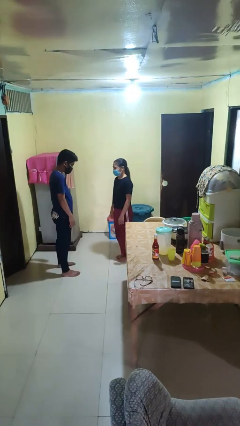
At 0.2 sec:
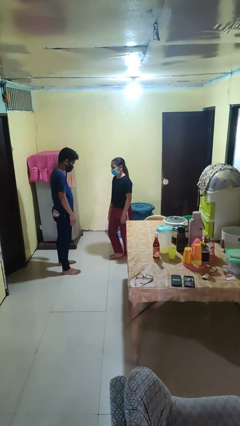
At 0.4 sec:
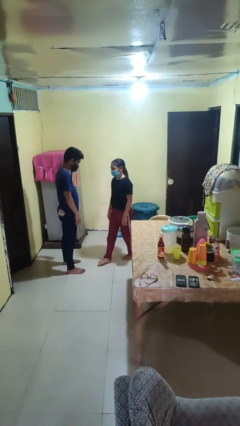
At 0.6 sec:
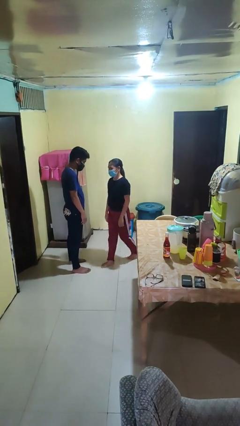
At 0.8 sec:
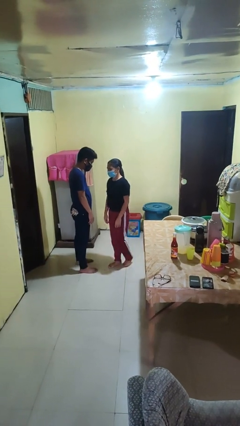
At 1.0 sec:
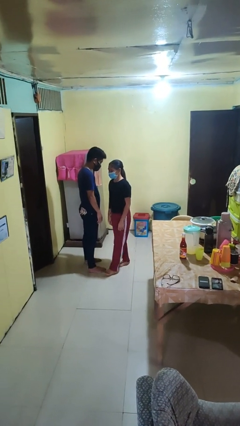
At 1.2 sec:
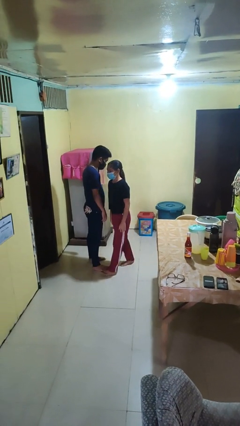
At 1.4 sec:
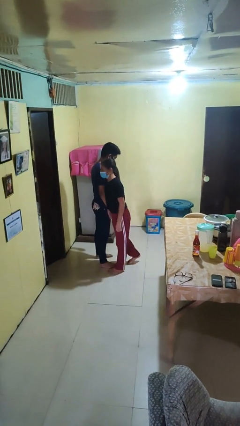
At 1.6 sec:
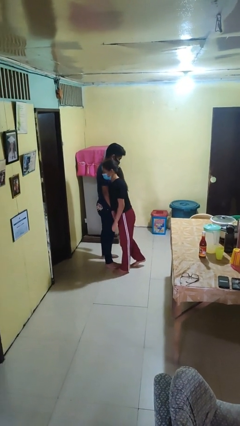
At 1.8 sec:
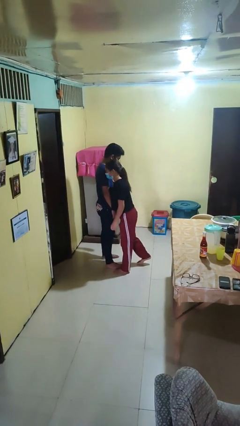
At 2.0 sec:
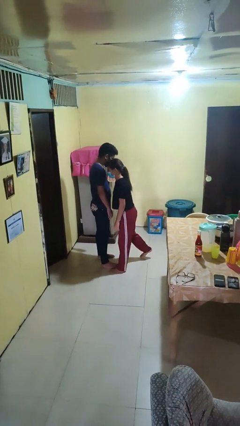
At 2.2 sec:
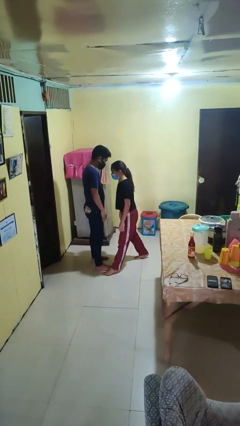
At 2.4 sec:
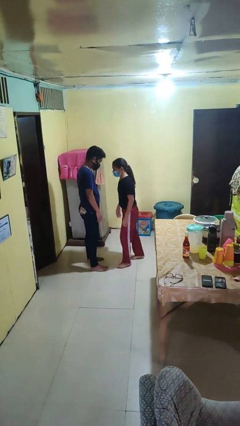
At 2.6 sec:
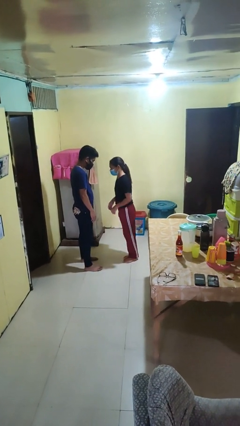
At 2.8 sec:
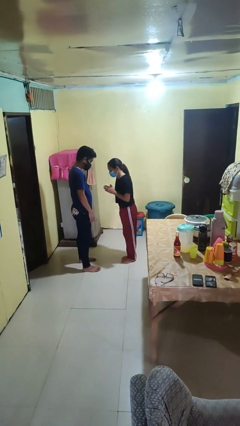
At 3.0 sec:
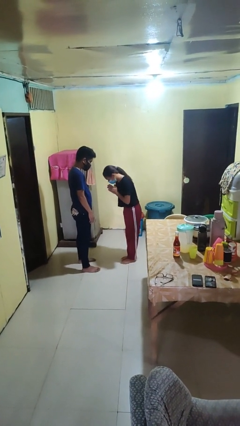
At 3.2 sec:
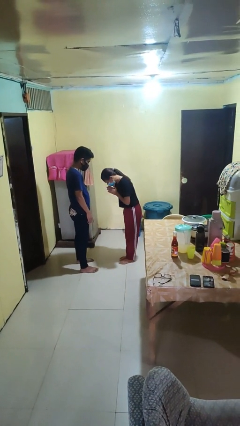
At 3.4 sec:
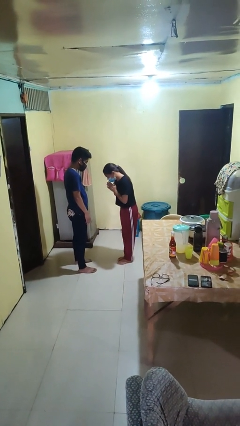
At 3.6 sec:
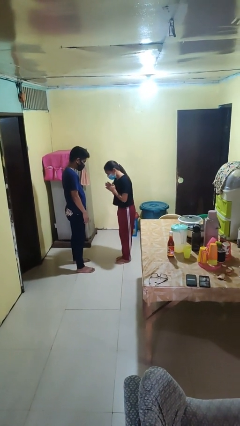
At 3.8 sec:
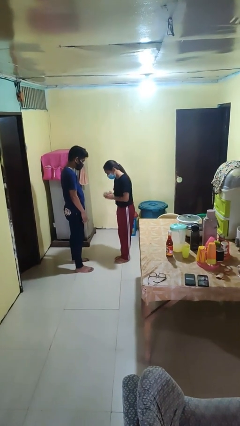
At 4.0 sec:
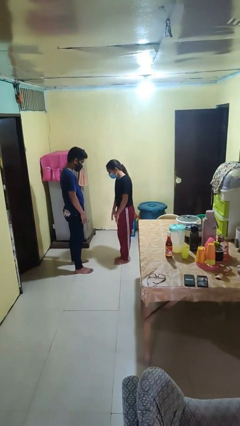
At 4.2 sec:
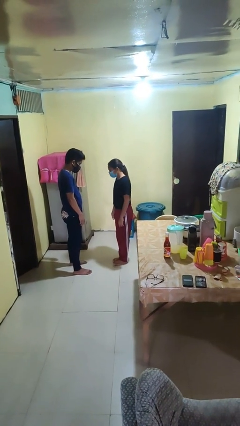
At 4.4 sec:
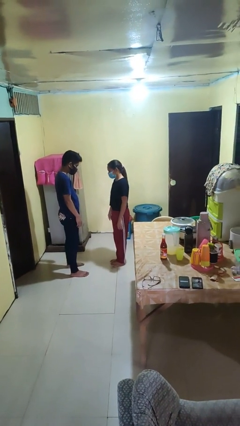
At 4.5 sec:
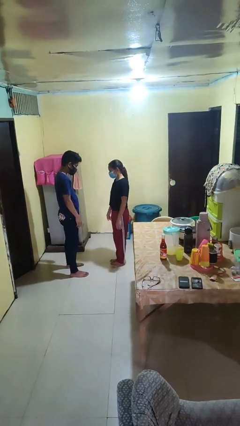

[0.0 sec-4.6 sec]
person bumps into person

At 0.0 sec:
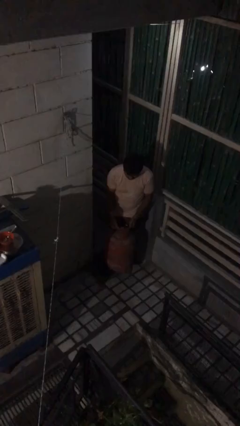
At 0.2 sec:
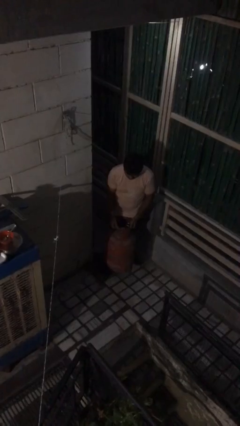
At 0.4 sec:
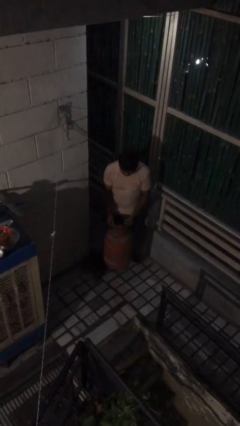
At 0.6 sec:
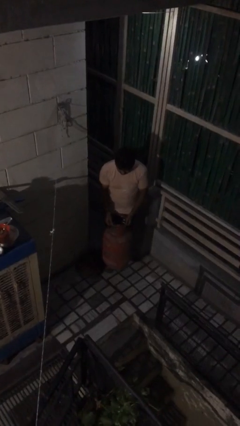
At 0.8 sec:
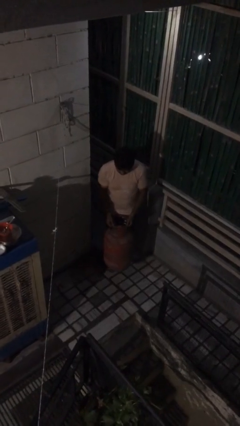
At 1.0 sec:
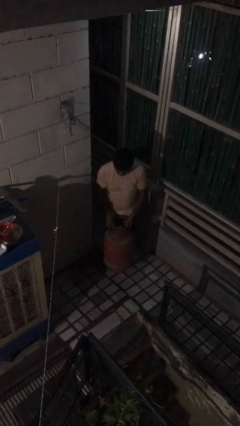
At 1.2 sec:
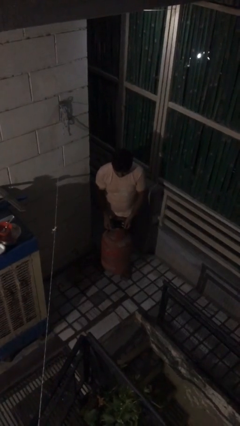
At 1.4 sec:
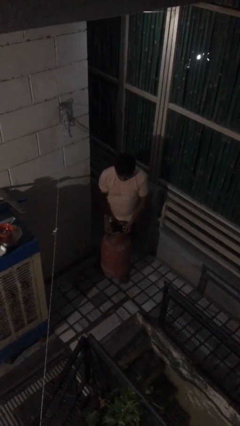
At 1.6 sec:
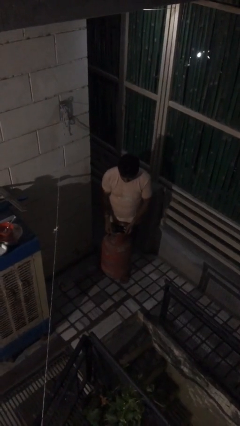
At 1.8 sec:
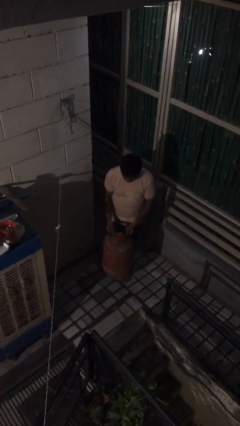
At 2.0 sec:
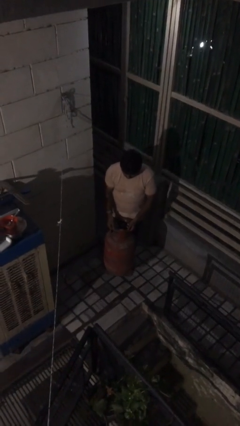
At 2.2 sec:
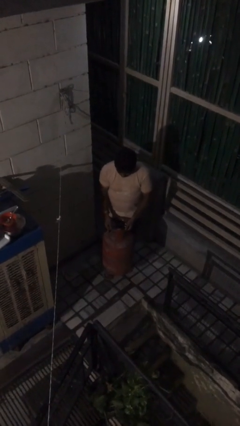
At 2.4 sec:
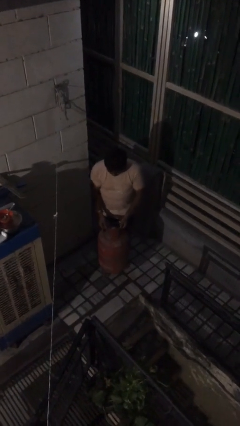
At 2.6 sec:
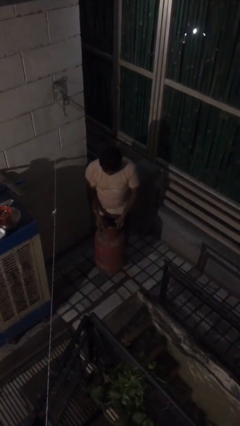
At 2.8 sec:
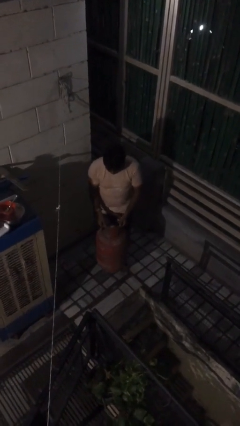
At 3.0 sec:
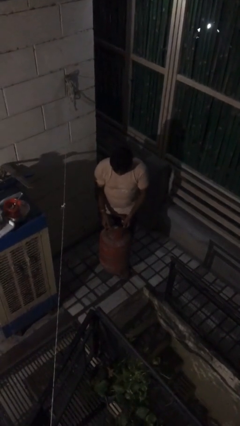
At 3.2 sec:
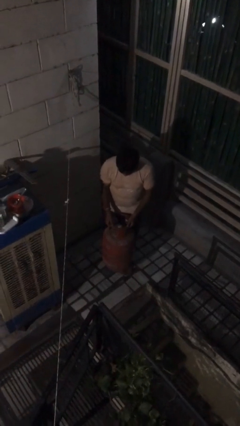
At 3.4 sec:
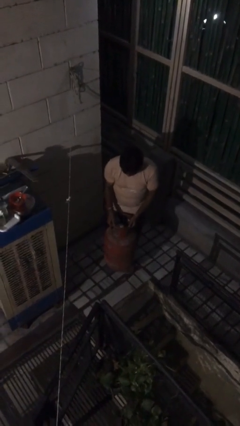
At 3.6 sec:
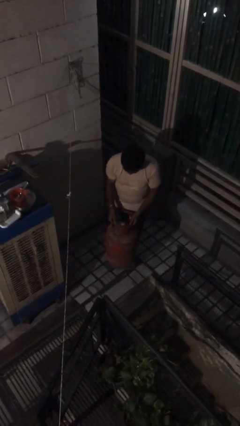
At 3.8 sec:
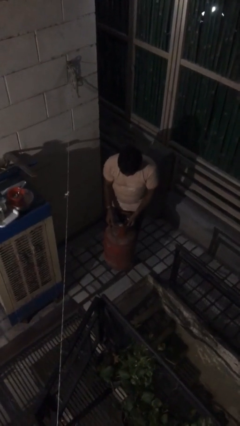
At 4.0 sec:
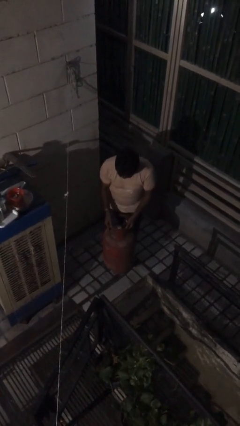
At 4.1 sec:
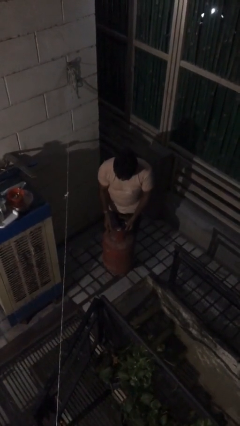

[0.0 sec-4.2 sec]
person carries heavy object

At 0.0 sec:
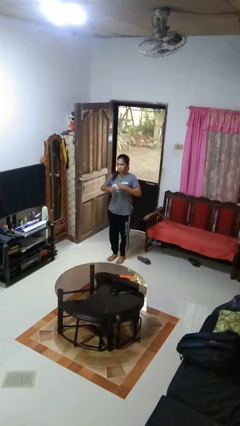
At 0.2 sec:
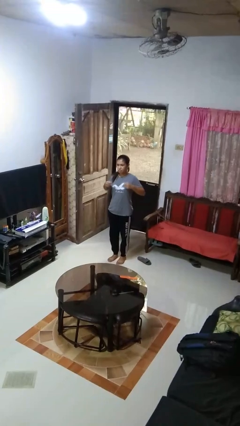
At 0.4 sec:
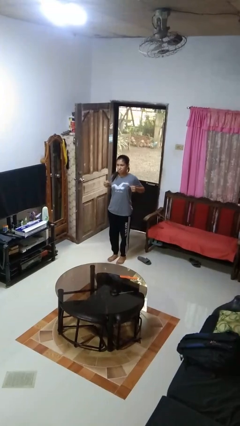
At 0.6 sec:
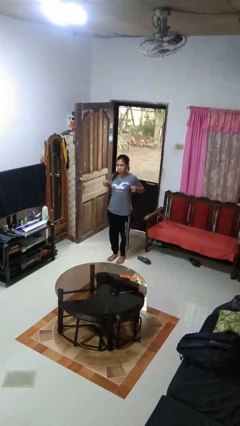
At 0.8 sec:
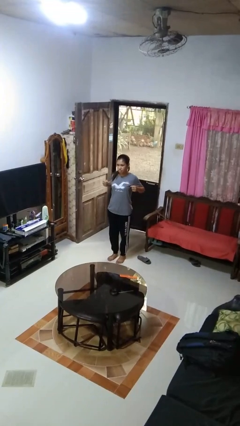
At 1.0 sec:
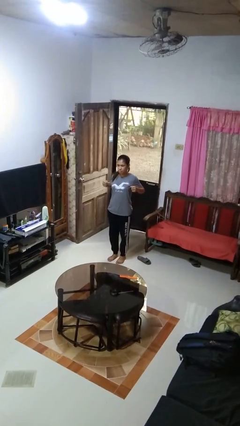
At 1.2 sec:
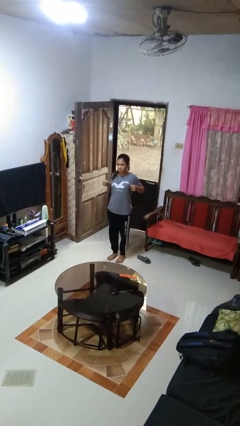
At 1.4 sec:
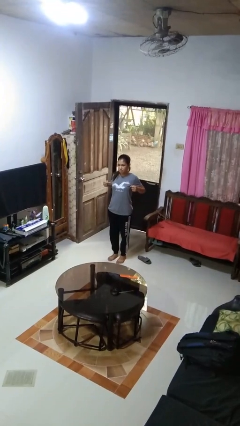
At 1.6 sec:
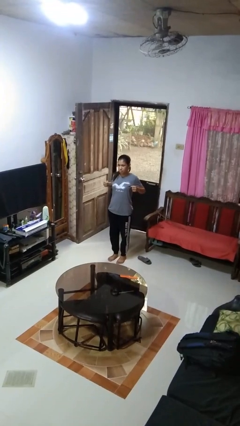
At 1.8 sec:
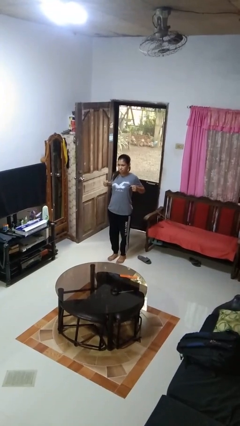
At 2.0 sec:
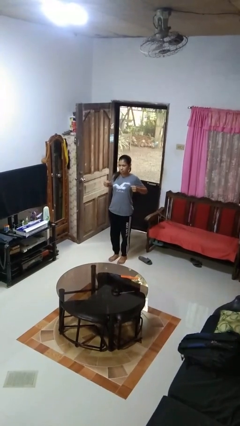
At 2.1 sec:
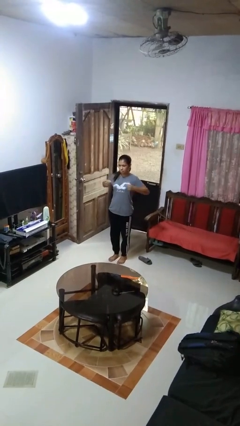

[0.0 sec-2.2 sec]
person gestures zoom in

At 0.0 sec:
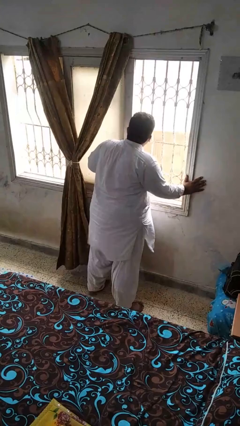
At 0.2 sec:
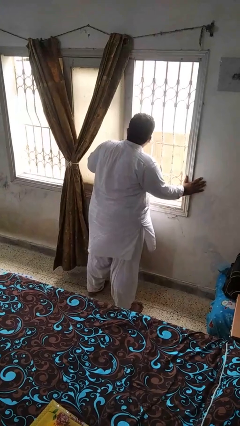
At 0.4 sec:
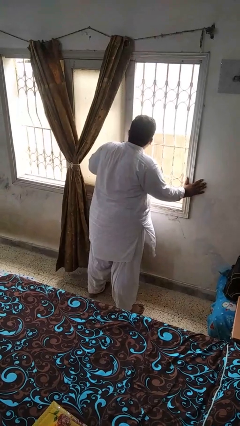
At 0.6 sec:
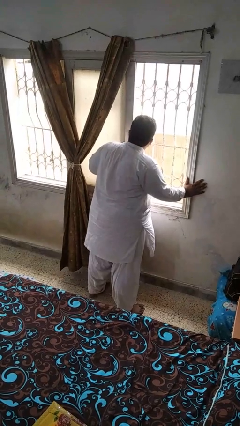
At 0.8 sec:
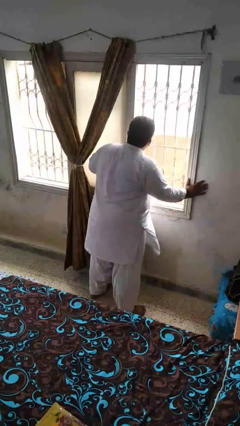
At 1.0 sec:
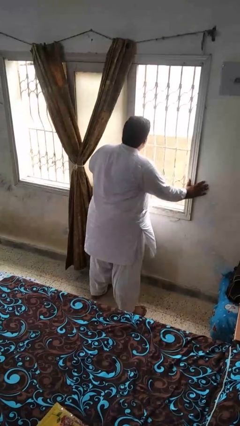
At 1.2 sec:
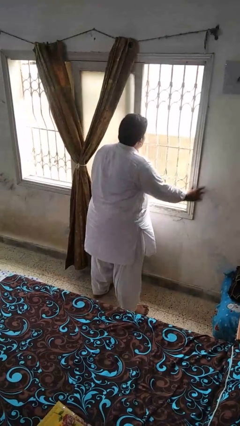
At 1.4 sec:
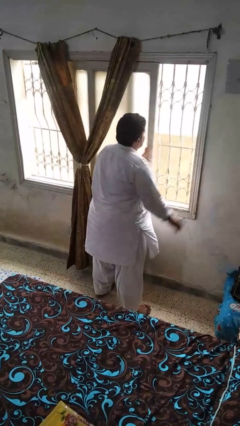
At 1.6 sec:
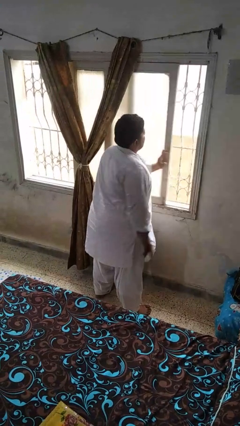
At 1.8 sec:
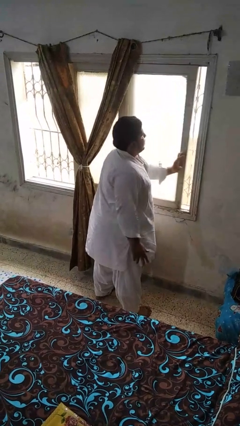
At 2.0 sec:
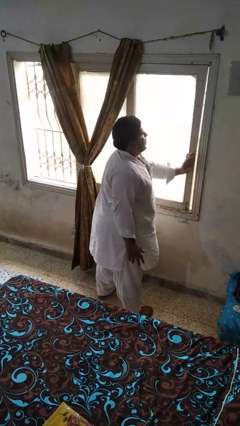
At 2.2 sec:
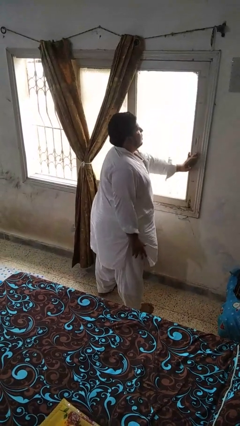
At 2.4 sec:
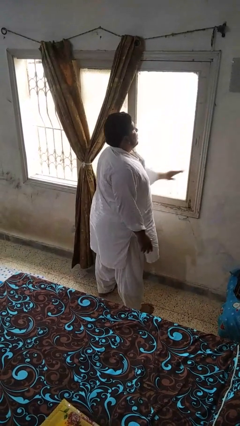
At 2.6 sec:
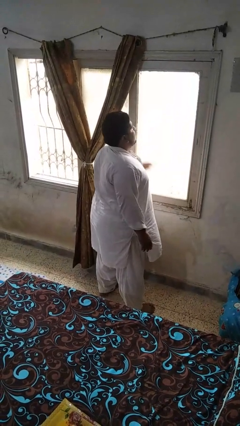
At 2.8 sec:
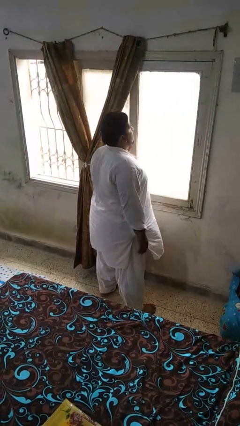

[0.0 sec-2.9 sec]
person closes home window

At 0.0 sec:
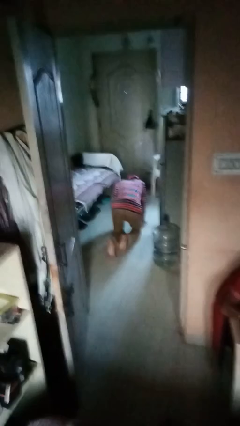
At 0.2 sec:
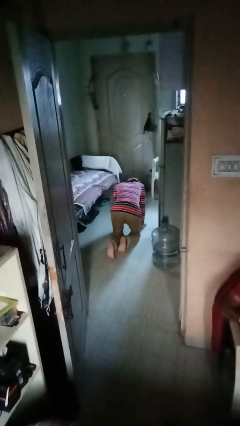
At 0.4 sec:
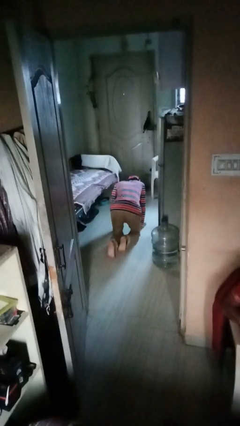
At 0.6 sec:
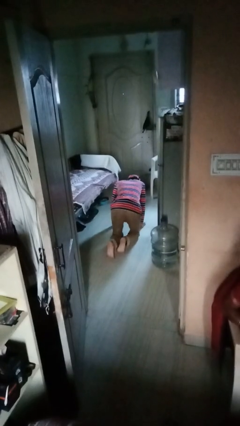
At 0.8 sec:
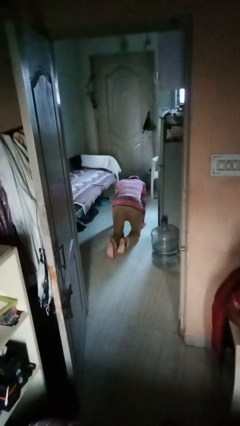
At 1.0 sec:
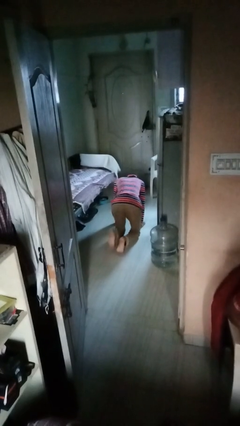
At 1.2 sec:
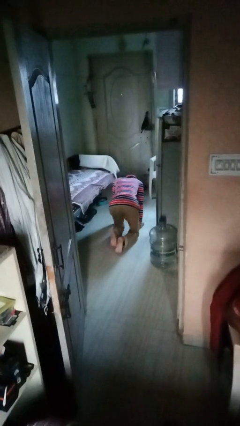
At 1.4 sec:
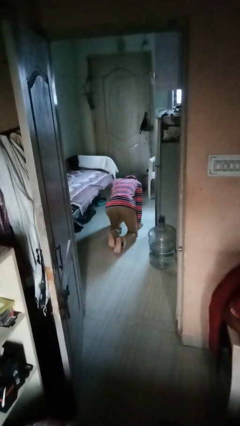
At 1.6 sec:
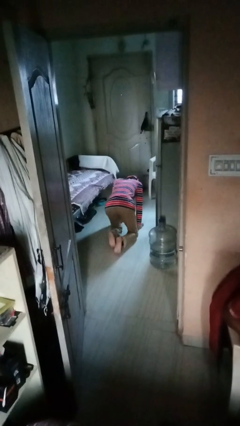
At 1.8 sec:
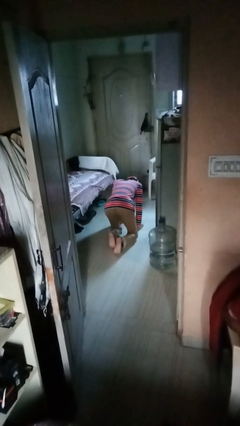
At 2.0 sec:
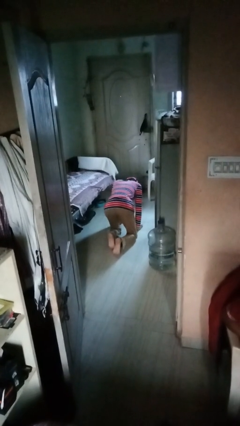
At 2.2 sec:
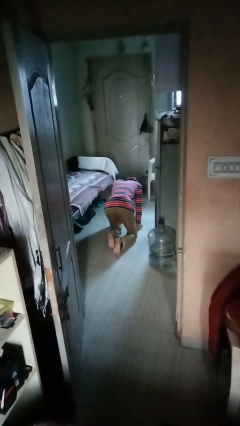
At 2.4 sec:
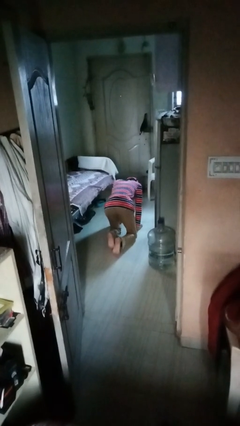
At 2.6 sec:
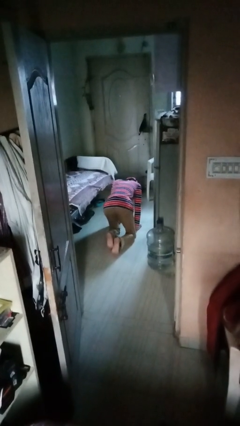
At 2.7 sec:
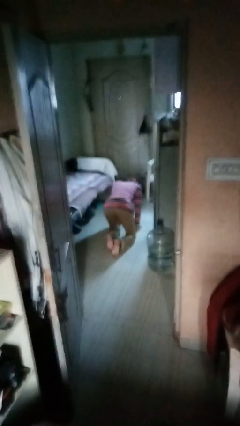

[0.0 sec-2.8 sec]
person crawls

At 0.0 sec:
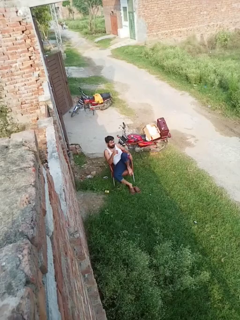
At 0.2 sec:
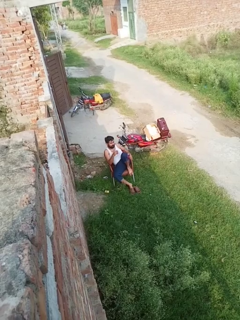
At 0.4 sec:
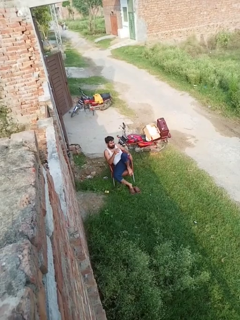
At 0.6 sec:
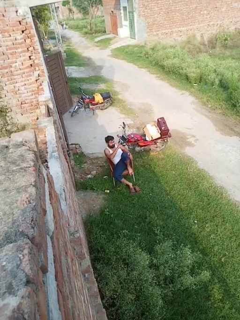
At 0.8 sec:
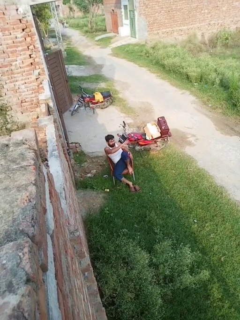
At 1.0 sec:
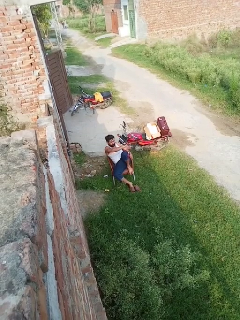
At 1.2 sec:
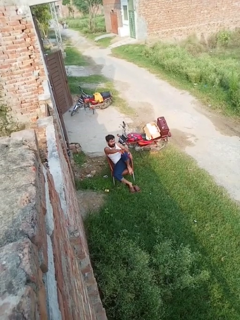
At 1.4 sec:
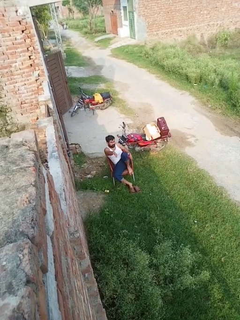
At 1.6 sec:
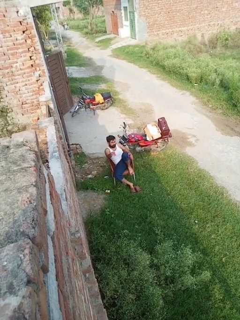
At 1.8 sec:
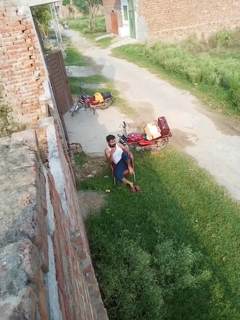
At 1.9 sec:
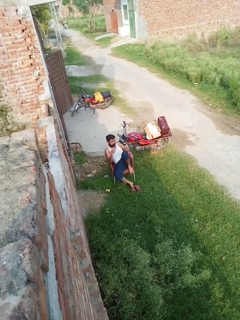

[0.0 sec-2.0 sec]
person gestures swipe right
